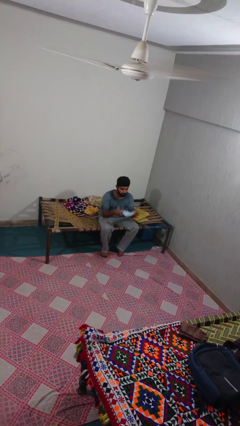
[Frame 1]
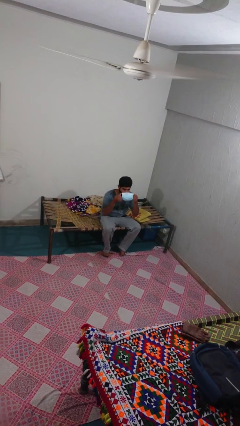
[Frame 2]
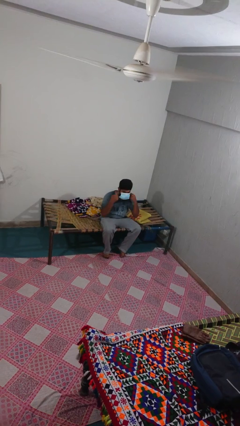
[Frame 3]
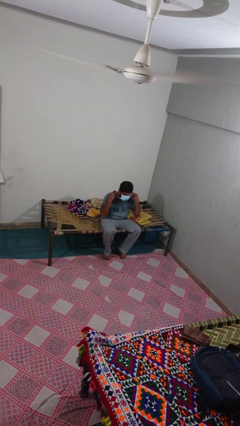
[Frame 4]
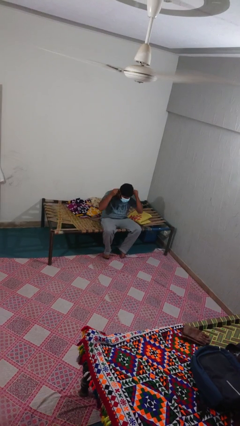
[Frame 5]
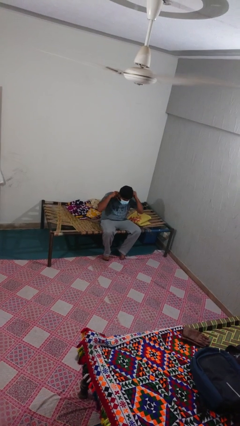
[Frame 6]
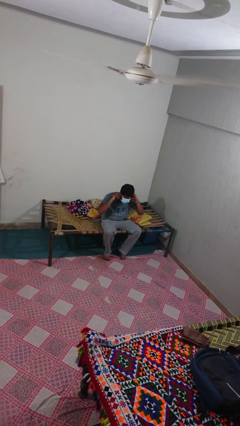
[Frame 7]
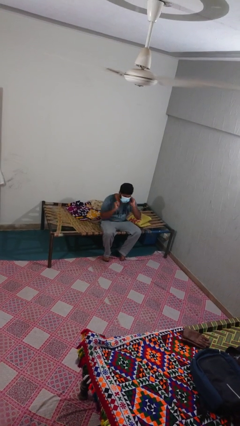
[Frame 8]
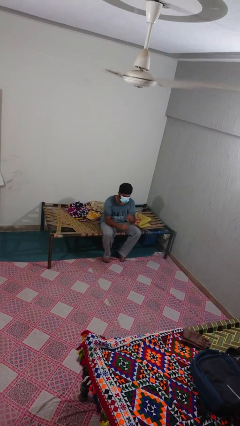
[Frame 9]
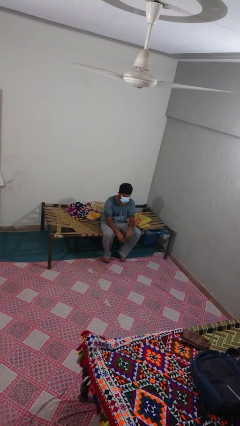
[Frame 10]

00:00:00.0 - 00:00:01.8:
person puts on facemask

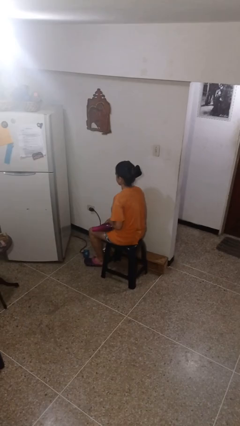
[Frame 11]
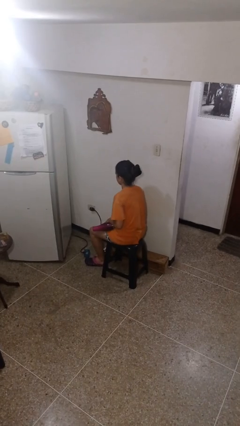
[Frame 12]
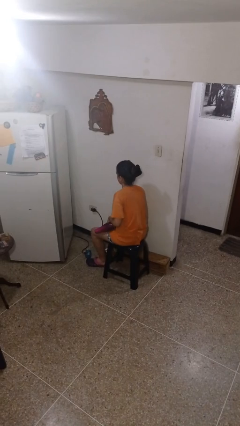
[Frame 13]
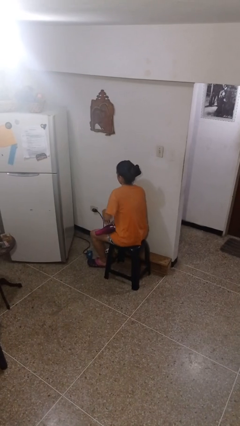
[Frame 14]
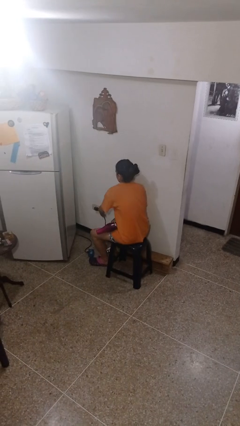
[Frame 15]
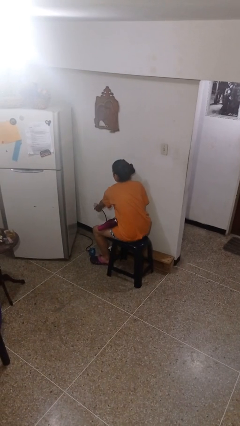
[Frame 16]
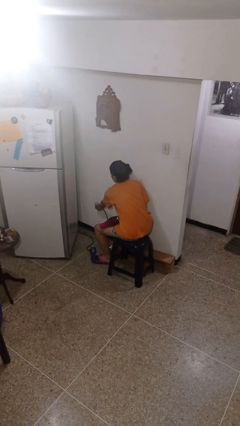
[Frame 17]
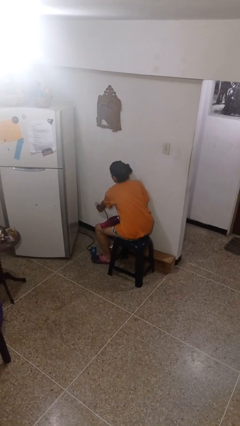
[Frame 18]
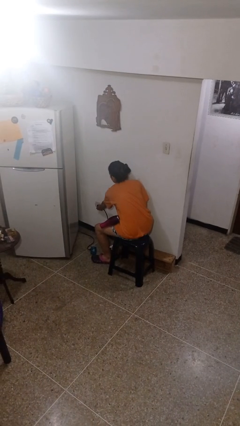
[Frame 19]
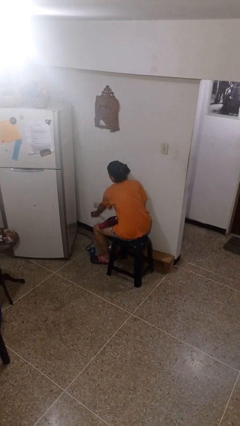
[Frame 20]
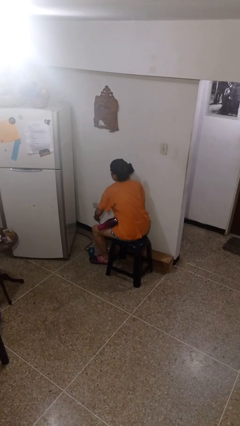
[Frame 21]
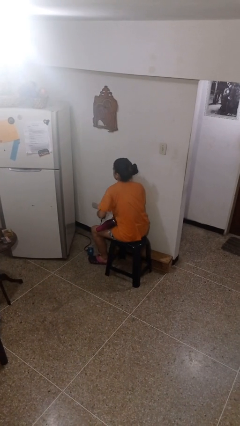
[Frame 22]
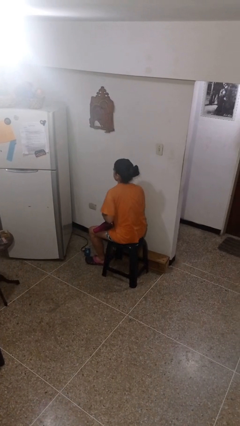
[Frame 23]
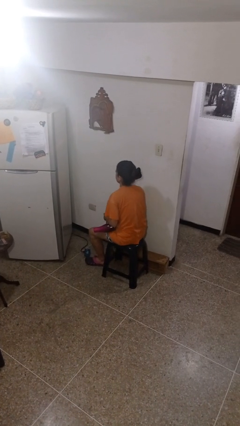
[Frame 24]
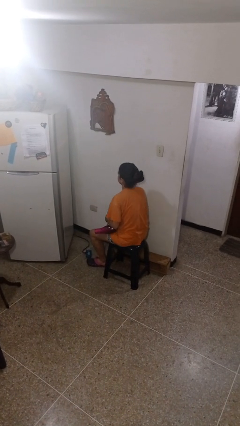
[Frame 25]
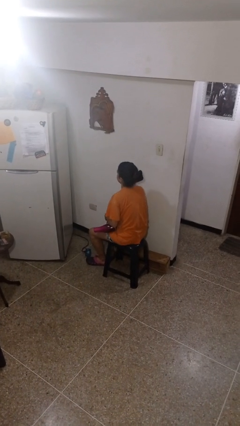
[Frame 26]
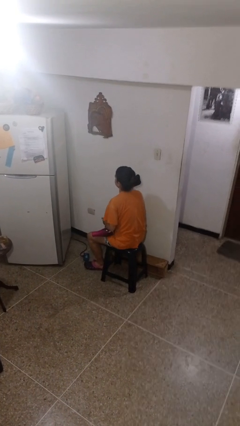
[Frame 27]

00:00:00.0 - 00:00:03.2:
person unplugs from electrical socket

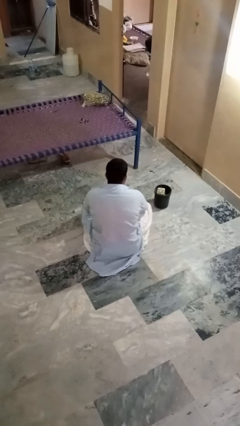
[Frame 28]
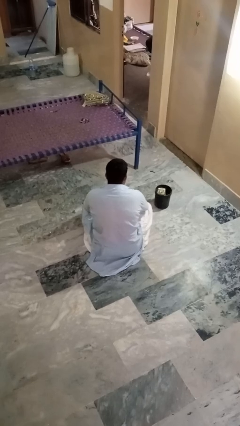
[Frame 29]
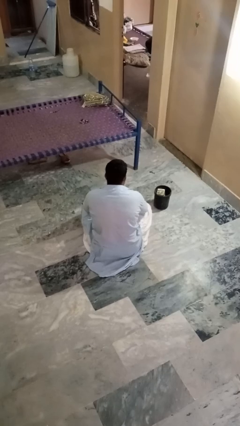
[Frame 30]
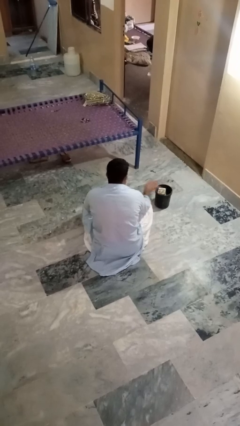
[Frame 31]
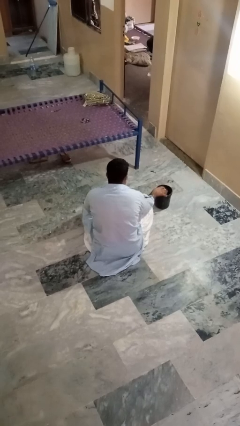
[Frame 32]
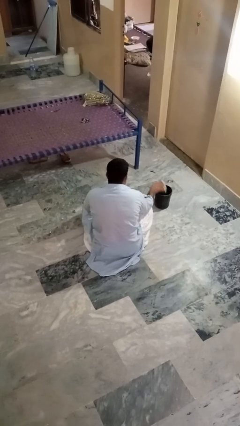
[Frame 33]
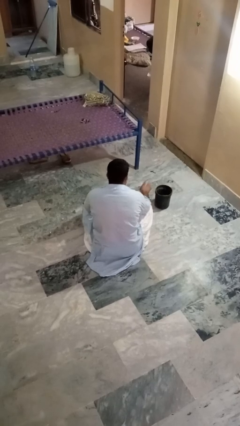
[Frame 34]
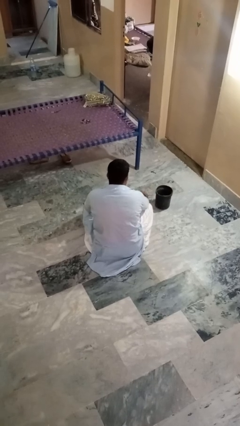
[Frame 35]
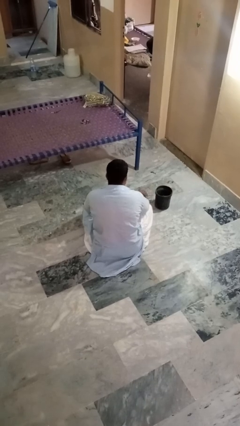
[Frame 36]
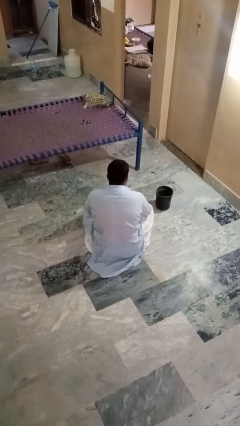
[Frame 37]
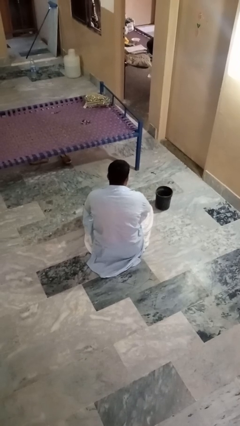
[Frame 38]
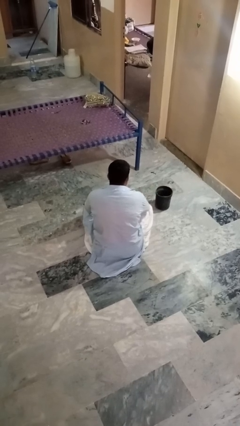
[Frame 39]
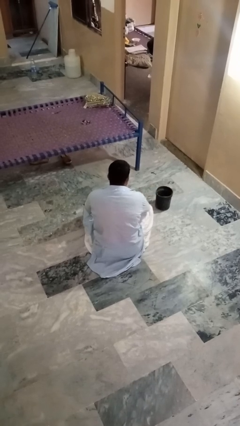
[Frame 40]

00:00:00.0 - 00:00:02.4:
person takes object from basket

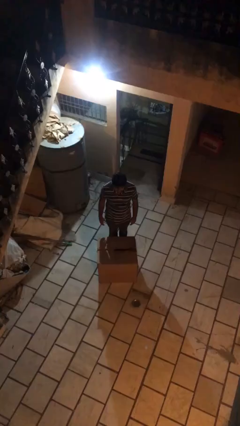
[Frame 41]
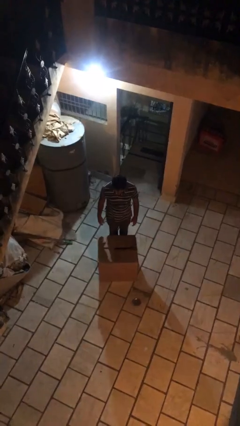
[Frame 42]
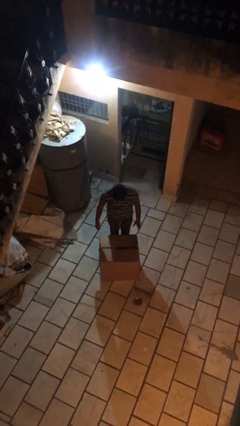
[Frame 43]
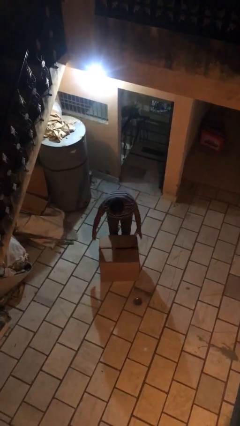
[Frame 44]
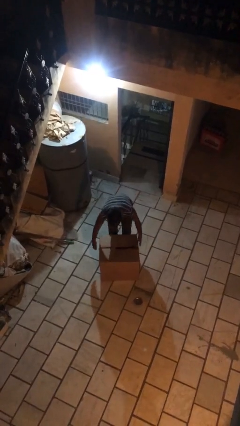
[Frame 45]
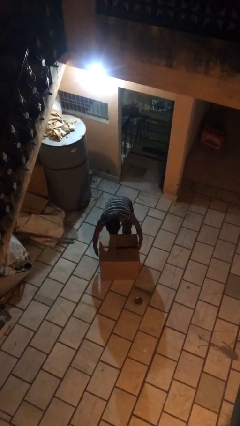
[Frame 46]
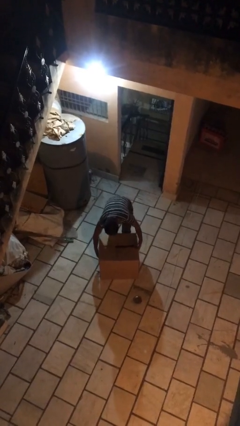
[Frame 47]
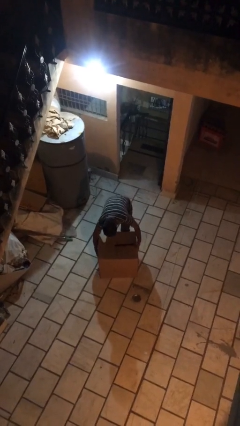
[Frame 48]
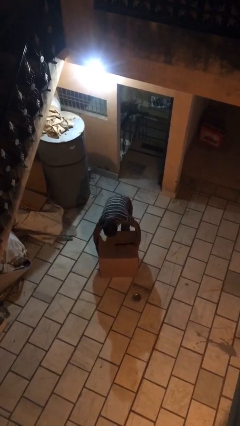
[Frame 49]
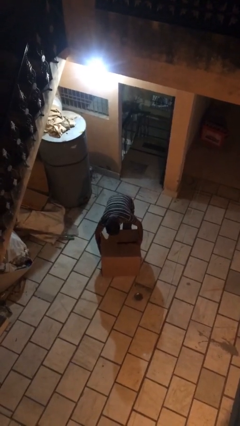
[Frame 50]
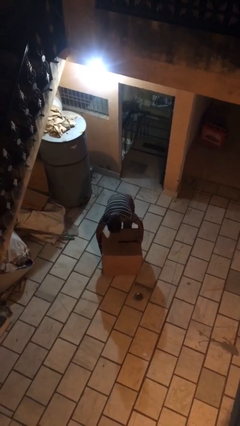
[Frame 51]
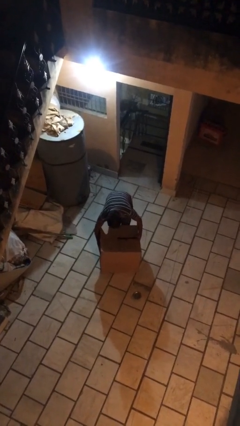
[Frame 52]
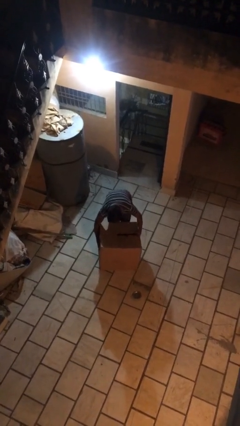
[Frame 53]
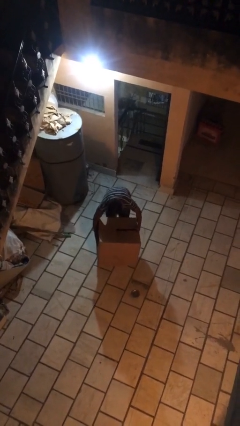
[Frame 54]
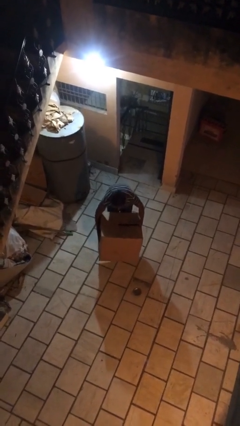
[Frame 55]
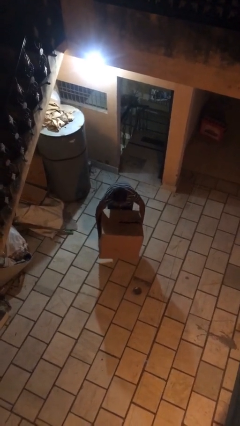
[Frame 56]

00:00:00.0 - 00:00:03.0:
person picks up object from floor

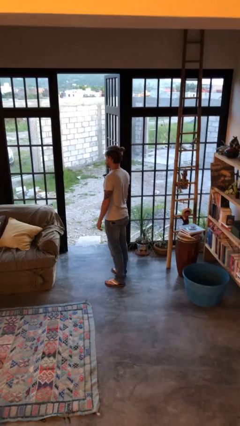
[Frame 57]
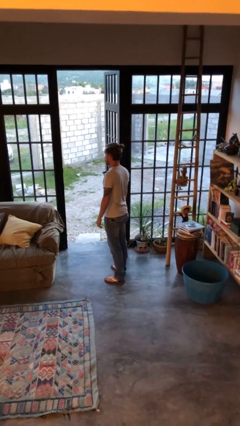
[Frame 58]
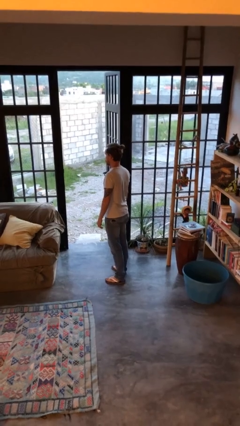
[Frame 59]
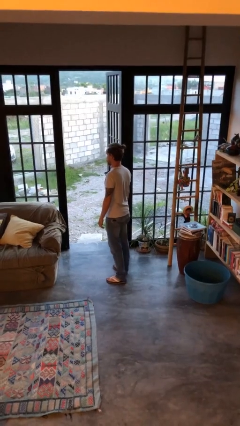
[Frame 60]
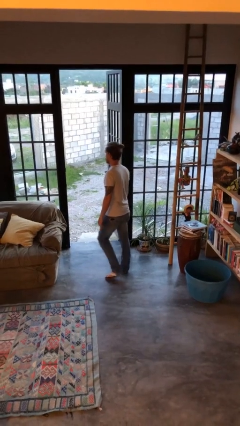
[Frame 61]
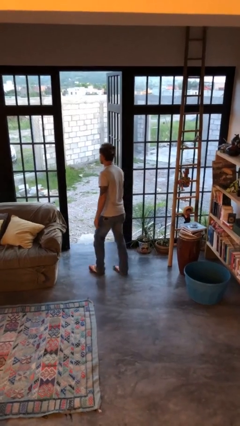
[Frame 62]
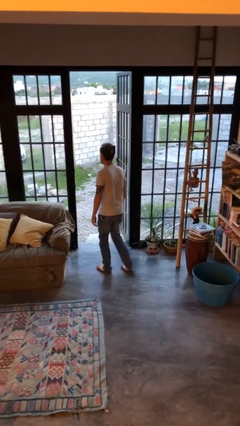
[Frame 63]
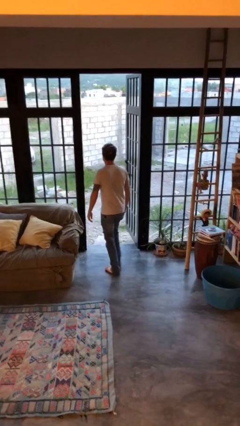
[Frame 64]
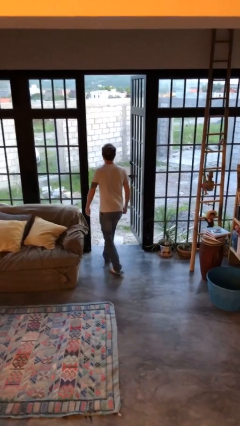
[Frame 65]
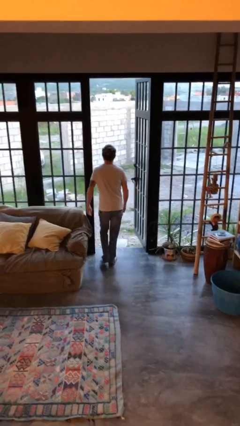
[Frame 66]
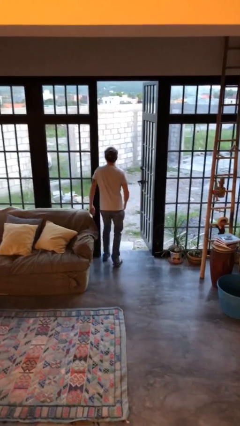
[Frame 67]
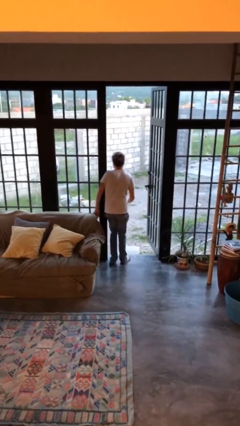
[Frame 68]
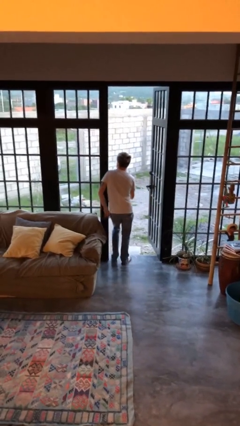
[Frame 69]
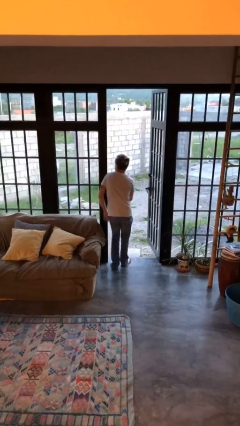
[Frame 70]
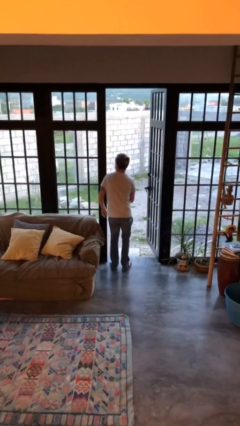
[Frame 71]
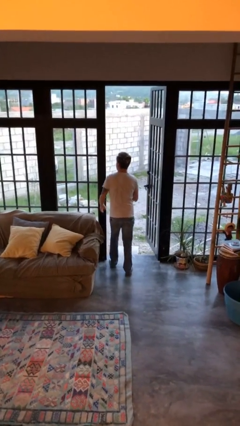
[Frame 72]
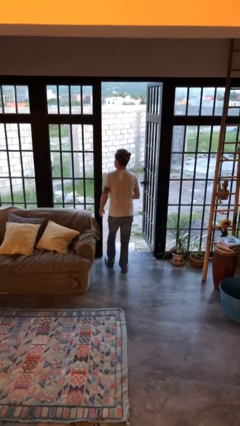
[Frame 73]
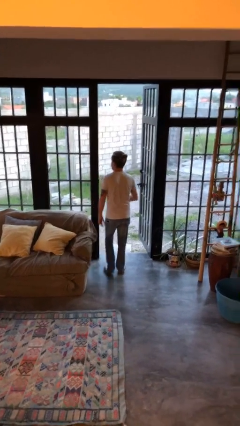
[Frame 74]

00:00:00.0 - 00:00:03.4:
person bumps into wall

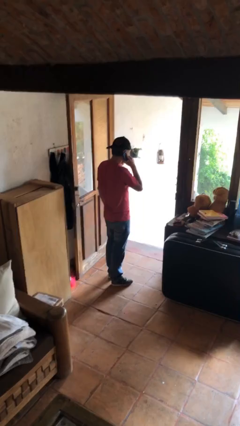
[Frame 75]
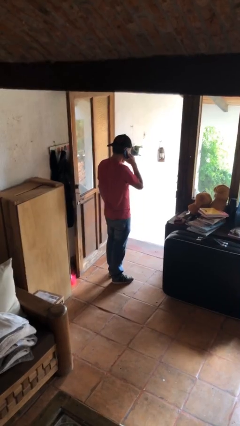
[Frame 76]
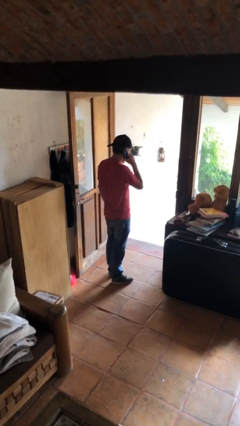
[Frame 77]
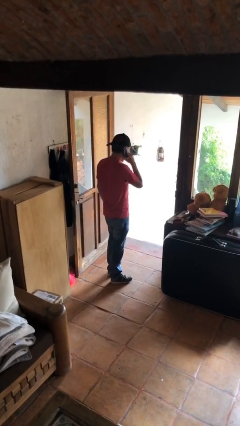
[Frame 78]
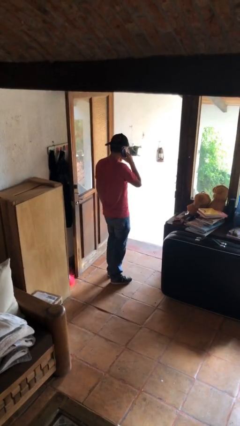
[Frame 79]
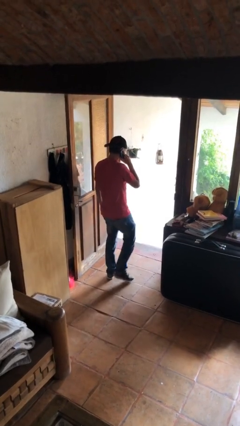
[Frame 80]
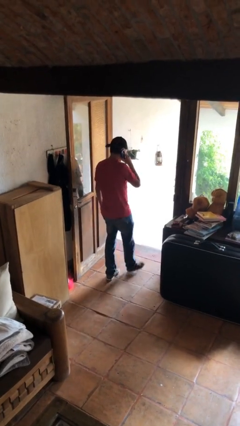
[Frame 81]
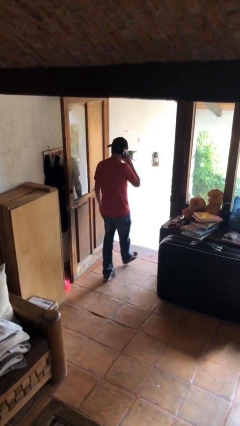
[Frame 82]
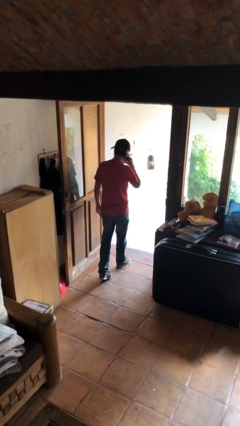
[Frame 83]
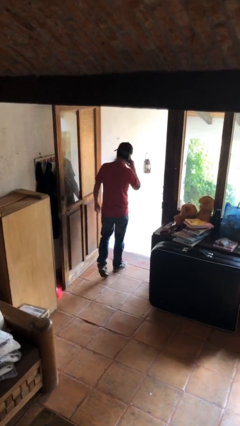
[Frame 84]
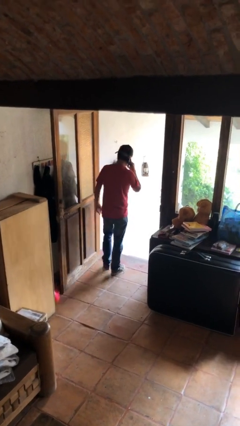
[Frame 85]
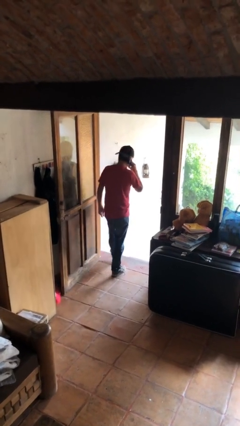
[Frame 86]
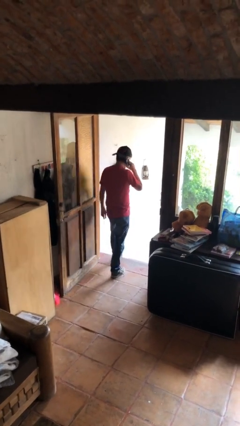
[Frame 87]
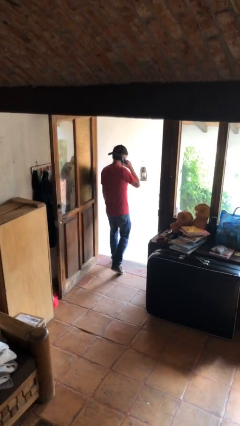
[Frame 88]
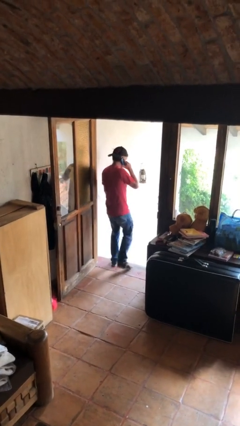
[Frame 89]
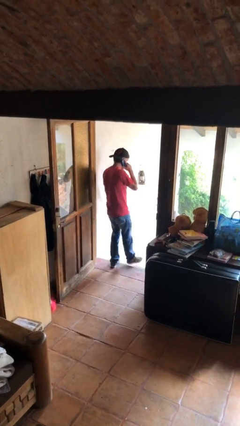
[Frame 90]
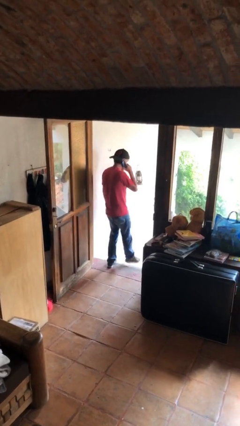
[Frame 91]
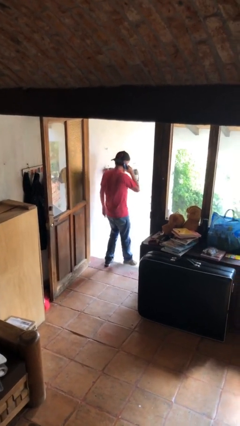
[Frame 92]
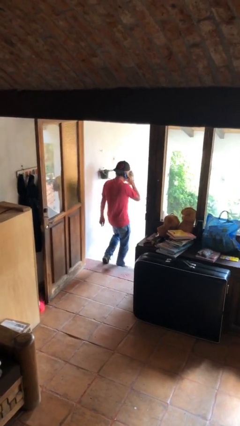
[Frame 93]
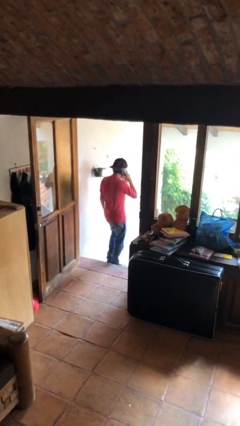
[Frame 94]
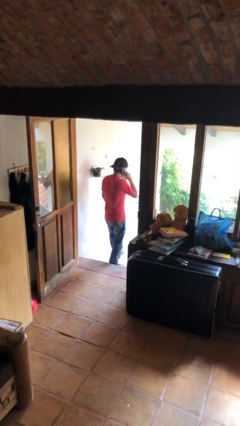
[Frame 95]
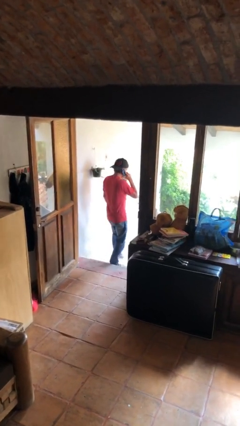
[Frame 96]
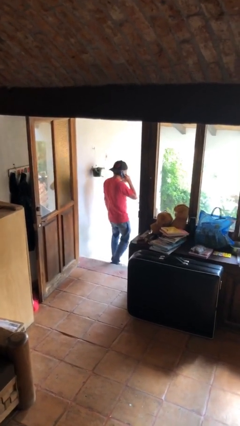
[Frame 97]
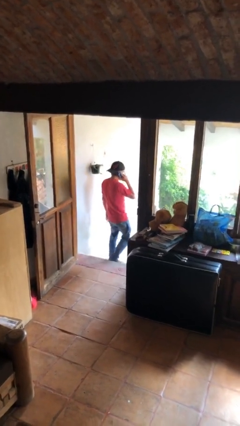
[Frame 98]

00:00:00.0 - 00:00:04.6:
person exits scene through structure
